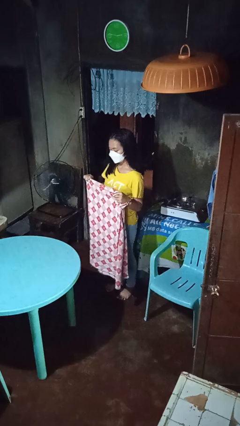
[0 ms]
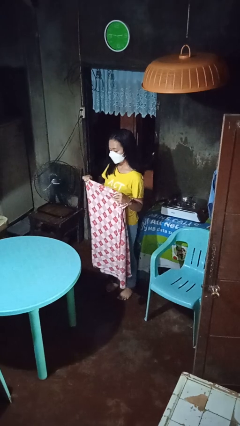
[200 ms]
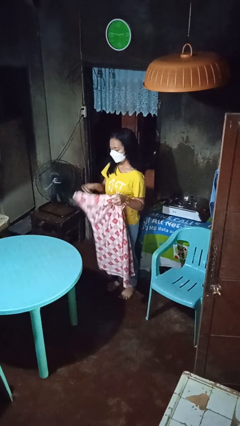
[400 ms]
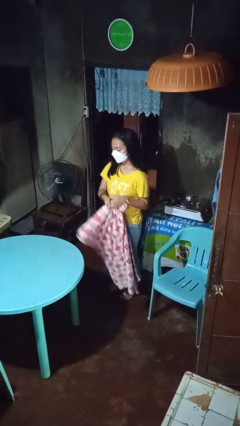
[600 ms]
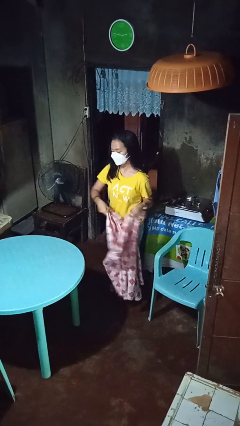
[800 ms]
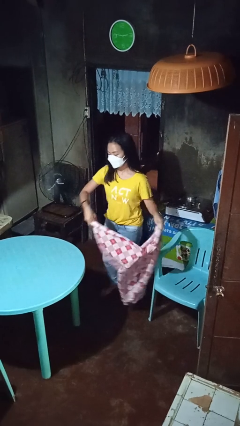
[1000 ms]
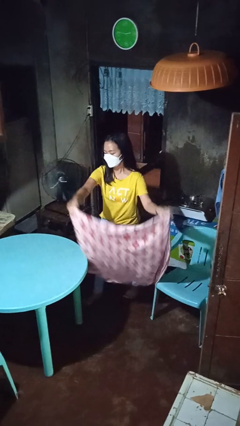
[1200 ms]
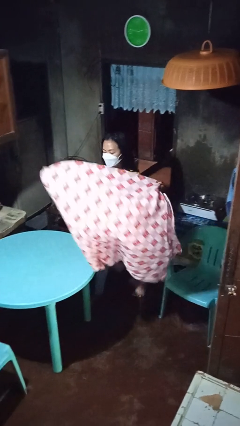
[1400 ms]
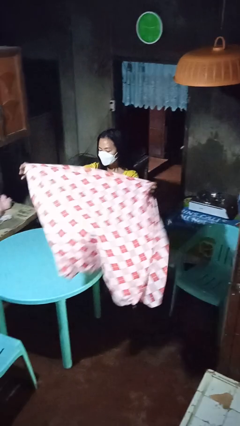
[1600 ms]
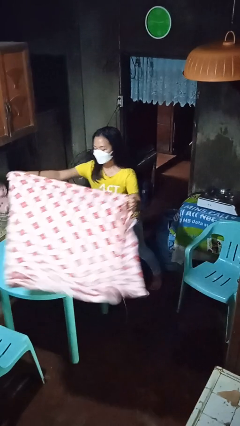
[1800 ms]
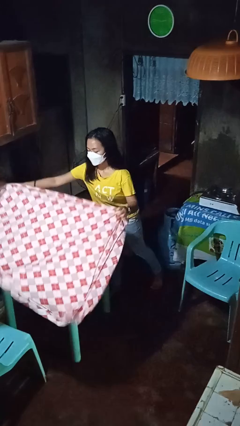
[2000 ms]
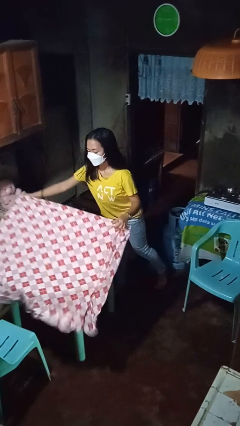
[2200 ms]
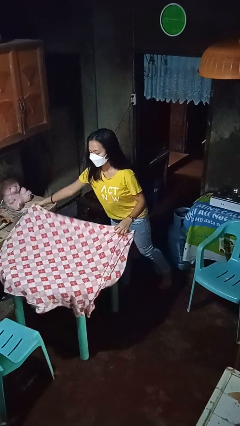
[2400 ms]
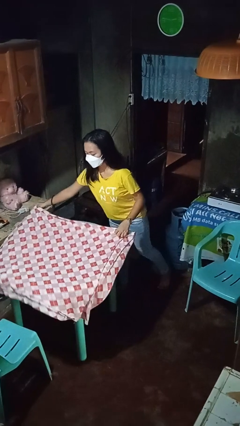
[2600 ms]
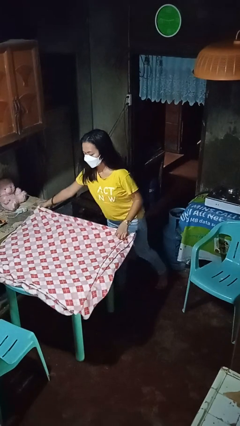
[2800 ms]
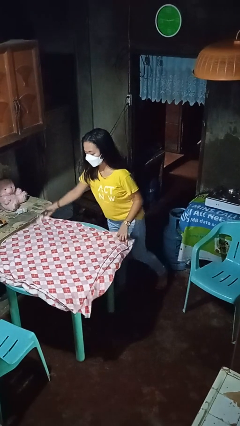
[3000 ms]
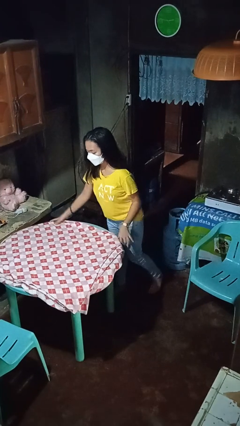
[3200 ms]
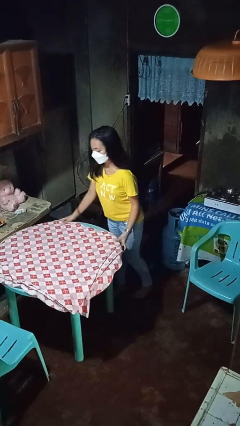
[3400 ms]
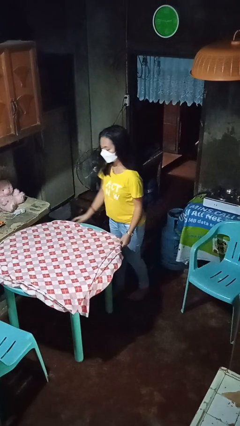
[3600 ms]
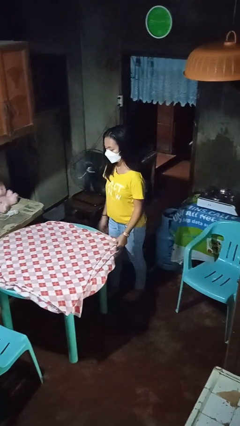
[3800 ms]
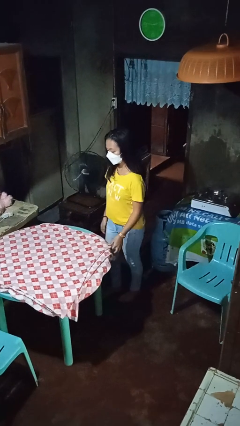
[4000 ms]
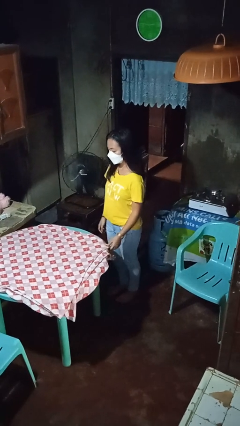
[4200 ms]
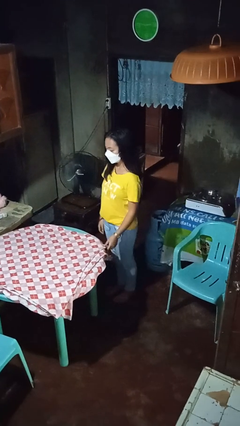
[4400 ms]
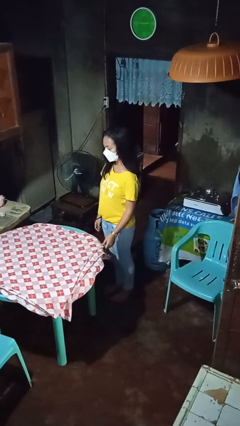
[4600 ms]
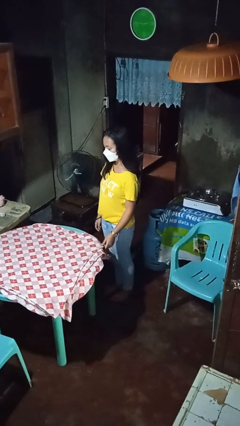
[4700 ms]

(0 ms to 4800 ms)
person spreads tablecloth

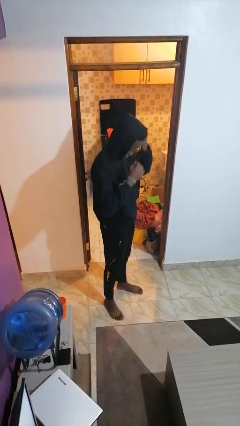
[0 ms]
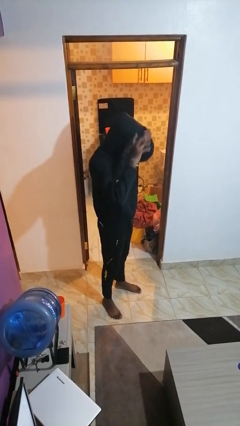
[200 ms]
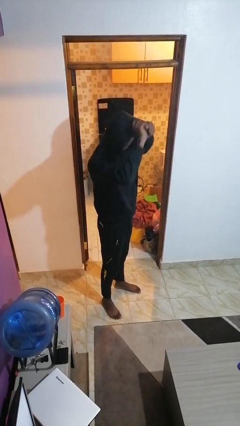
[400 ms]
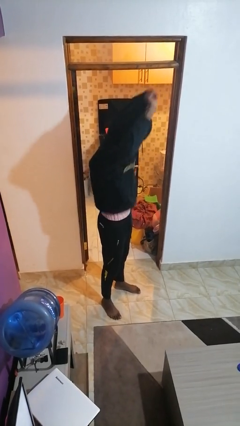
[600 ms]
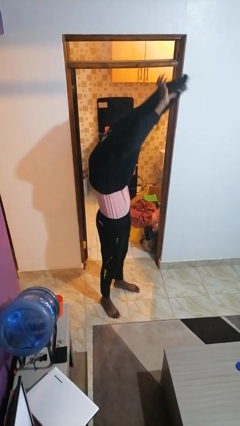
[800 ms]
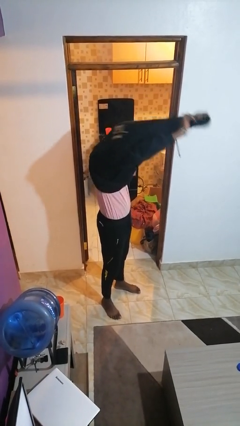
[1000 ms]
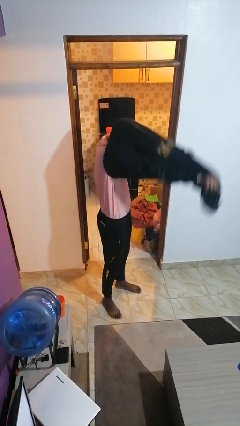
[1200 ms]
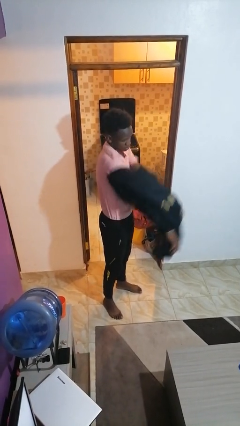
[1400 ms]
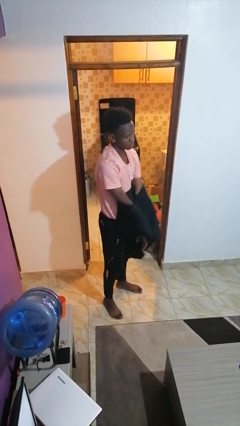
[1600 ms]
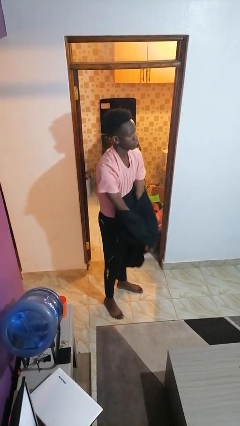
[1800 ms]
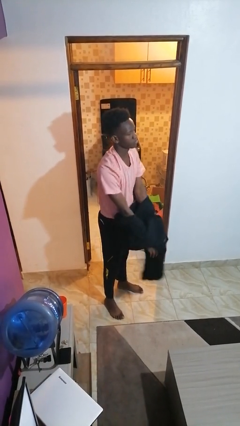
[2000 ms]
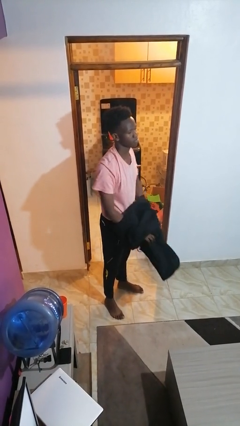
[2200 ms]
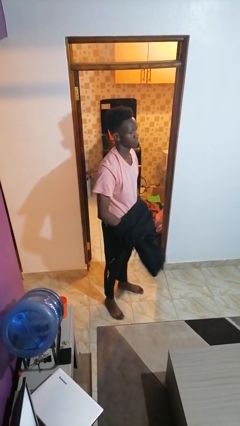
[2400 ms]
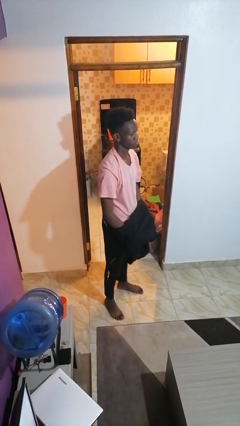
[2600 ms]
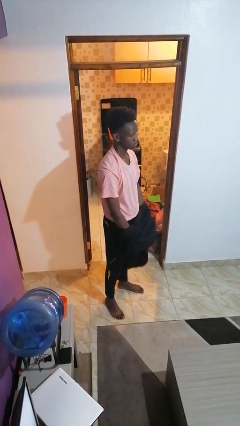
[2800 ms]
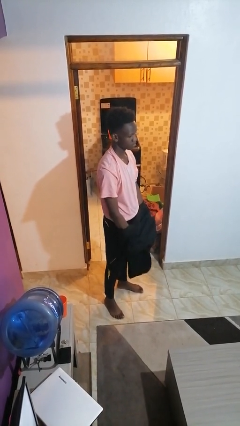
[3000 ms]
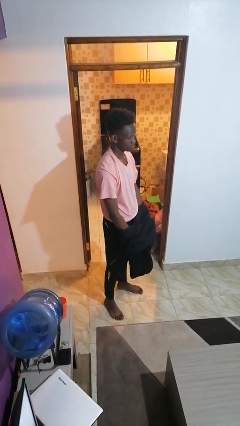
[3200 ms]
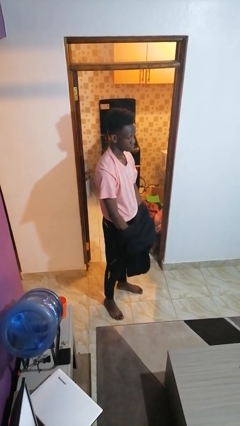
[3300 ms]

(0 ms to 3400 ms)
person takes off hoodie

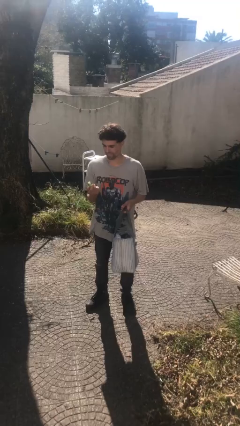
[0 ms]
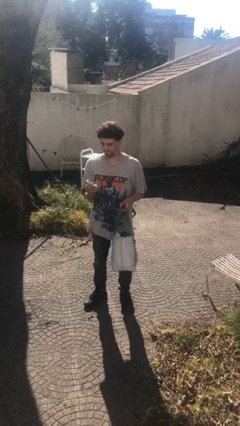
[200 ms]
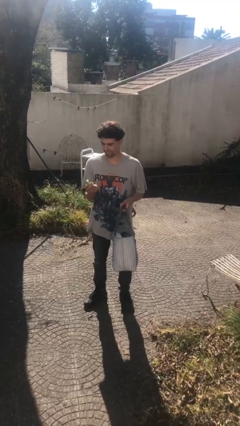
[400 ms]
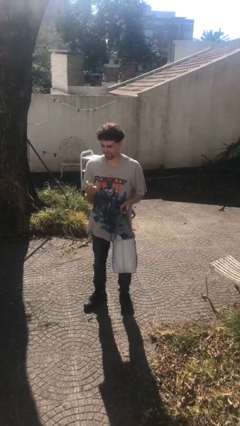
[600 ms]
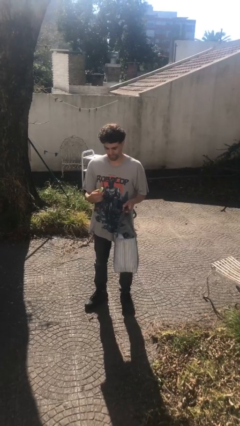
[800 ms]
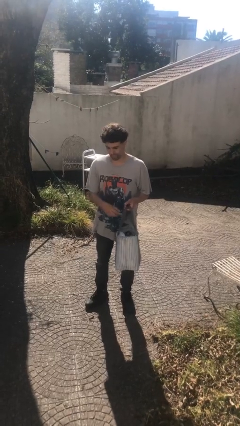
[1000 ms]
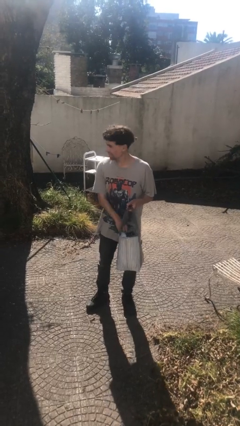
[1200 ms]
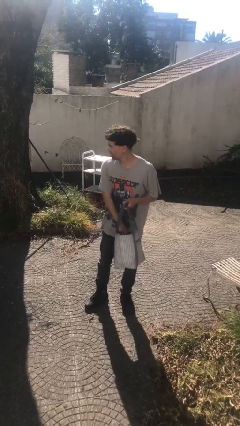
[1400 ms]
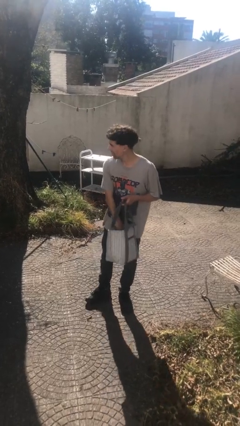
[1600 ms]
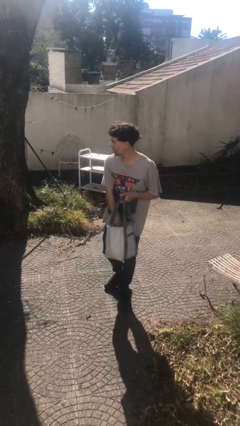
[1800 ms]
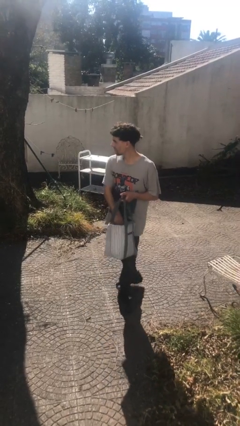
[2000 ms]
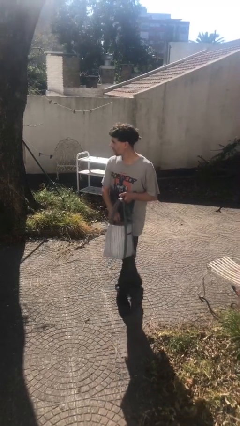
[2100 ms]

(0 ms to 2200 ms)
person puts object into purse

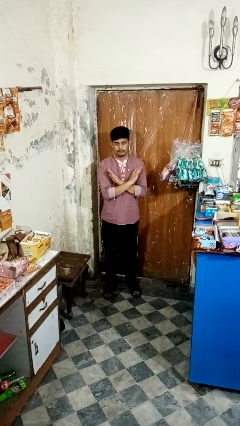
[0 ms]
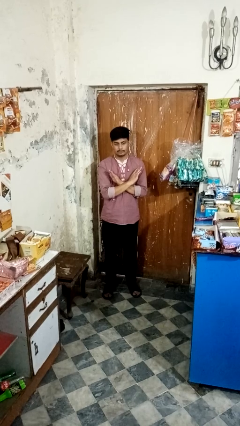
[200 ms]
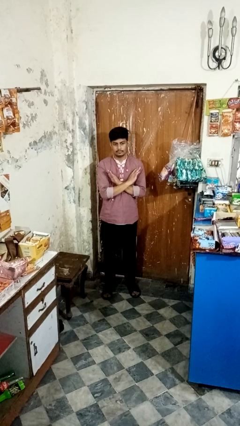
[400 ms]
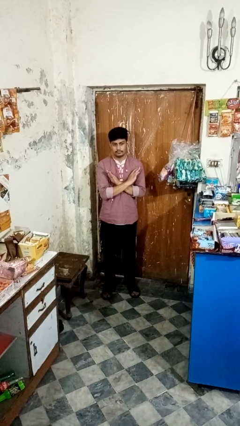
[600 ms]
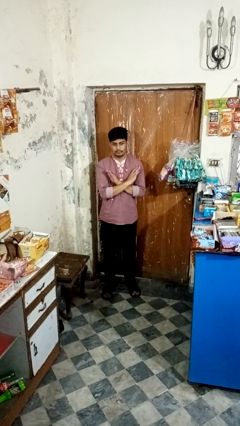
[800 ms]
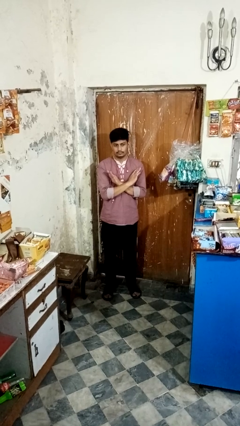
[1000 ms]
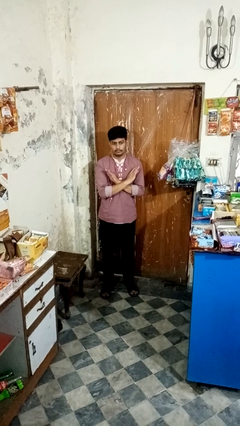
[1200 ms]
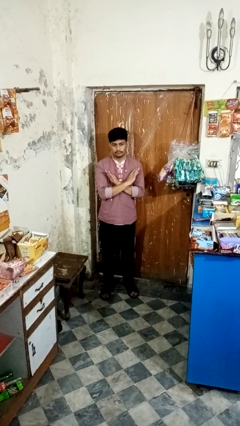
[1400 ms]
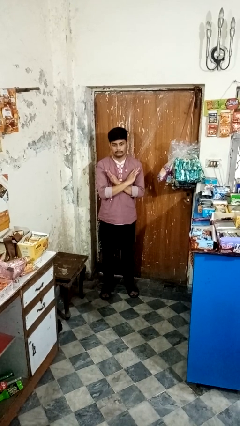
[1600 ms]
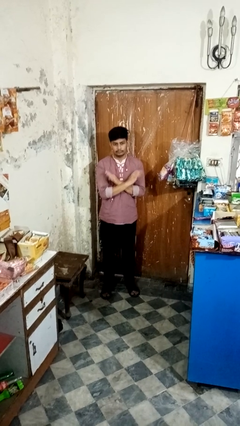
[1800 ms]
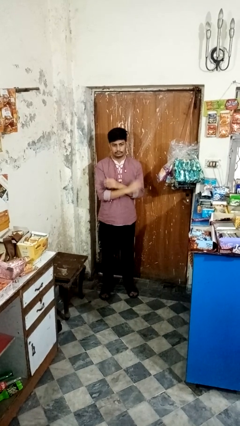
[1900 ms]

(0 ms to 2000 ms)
person gestures arms x

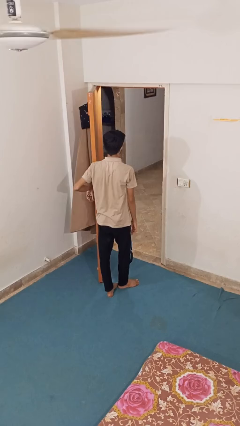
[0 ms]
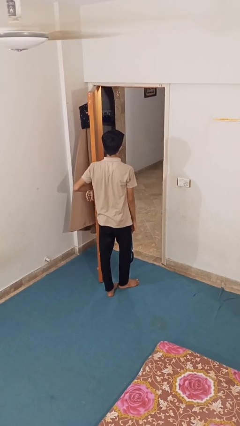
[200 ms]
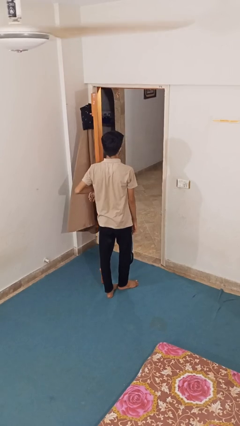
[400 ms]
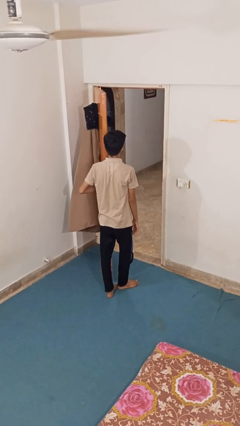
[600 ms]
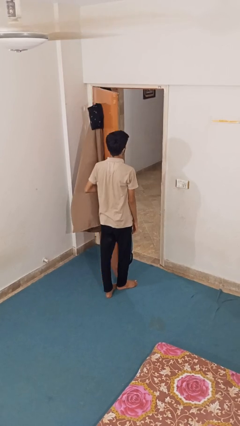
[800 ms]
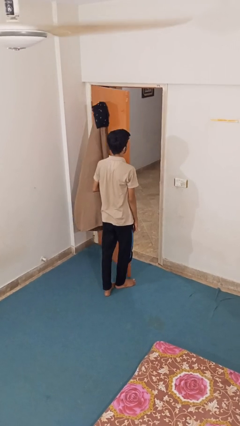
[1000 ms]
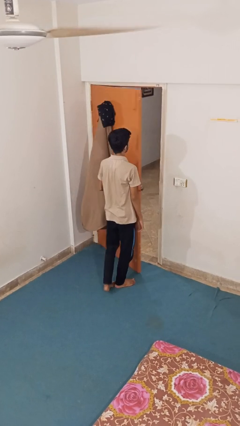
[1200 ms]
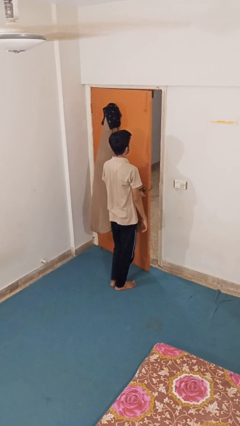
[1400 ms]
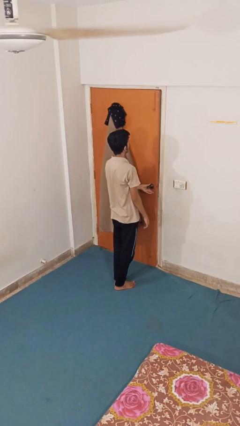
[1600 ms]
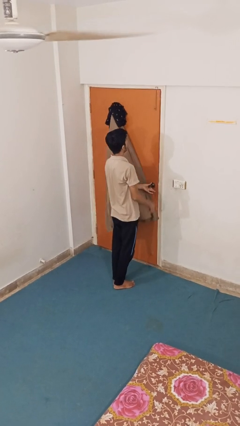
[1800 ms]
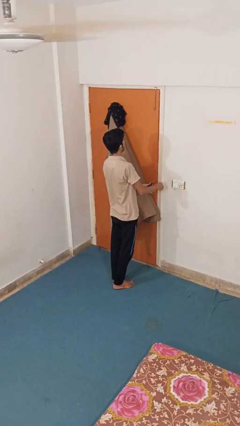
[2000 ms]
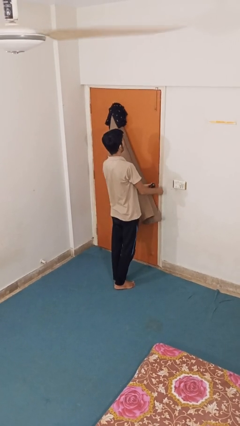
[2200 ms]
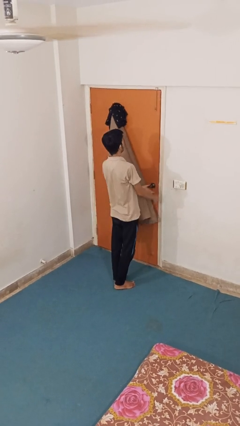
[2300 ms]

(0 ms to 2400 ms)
person closes facility door

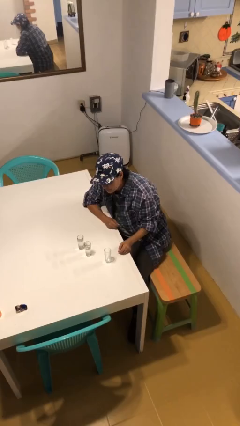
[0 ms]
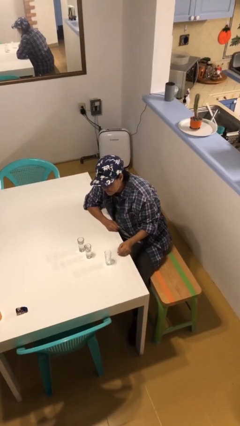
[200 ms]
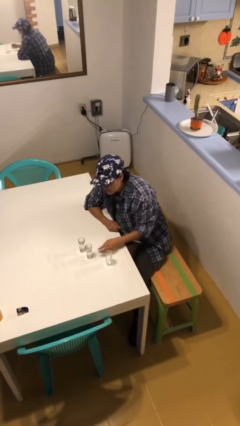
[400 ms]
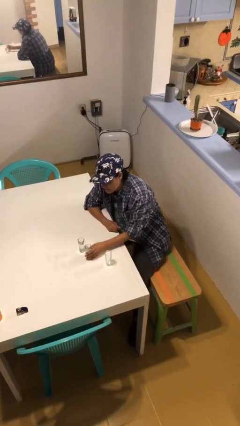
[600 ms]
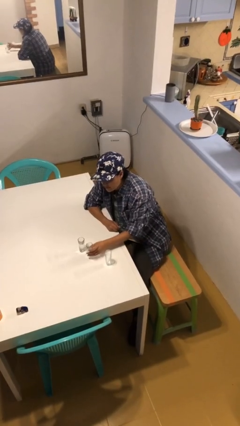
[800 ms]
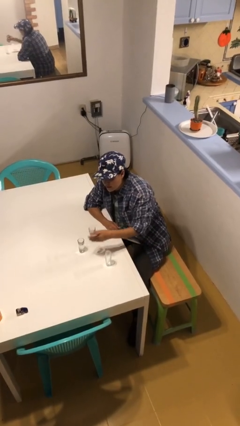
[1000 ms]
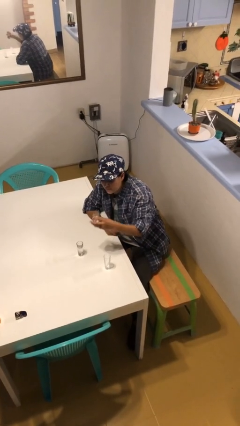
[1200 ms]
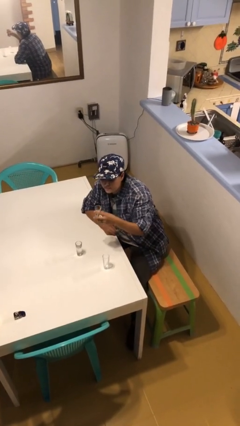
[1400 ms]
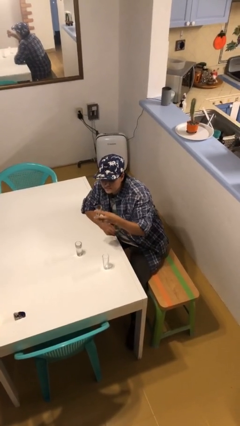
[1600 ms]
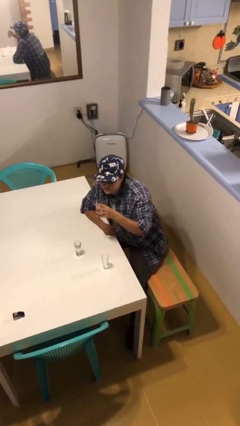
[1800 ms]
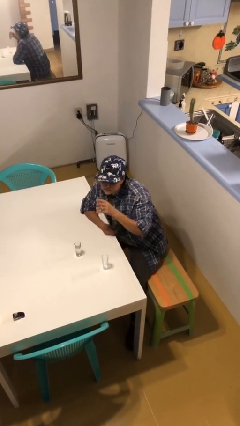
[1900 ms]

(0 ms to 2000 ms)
person picks up object from table

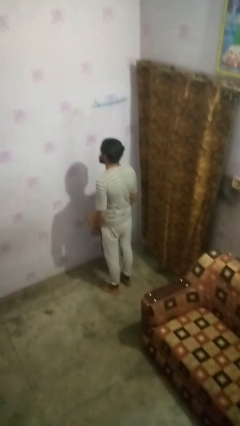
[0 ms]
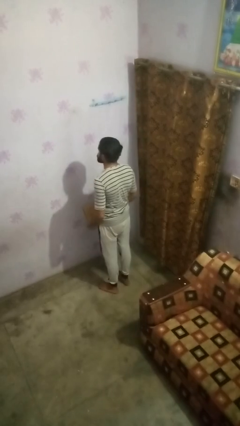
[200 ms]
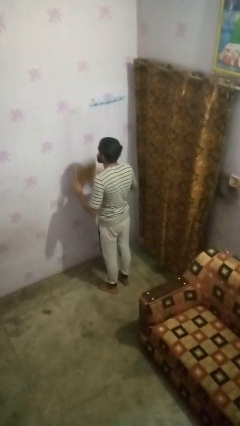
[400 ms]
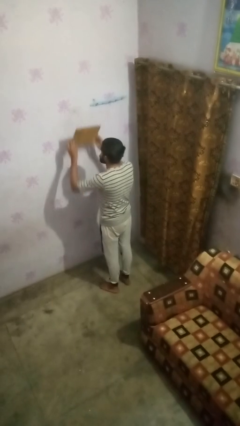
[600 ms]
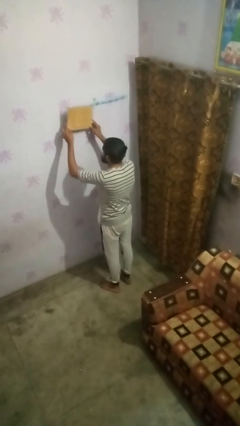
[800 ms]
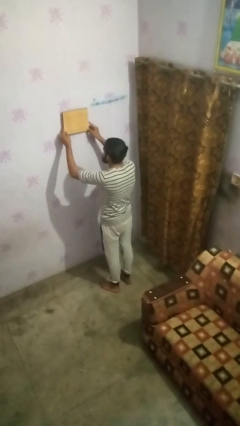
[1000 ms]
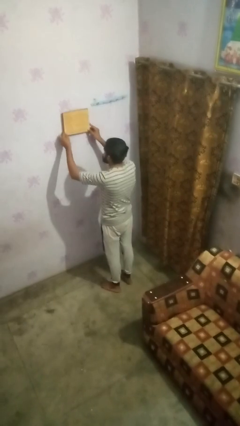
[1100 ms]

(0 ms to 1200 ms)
person puts up picture frame
